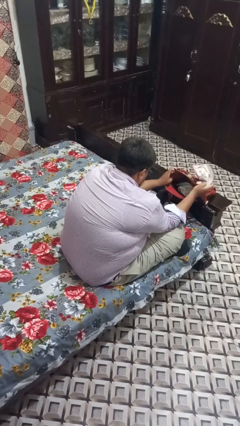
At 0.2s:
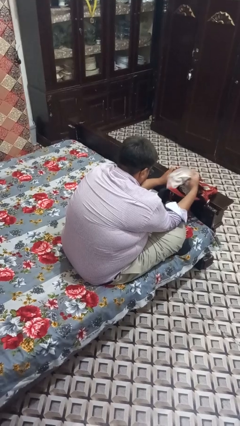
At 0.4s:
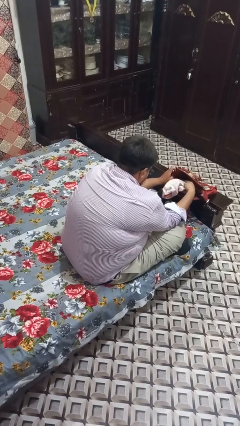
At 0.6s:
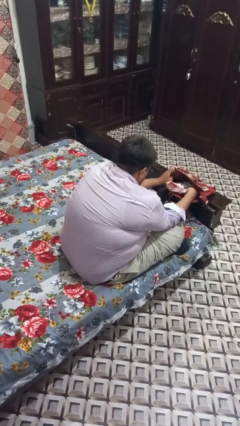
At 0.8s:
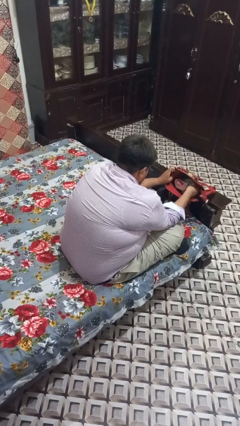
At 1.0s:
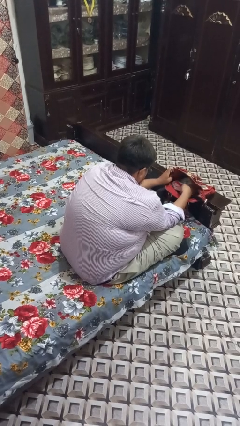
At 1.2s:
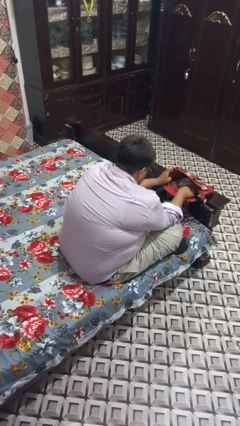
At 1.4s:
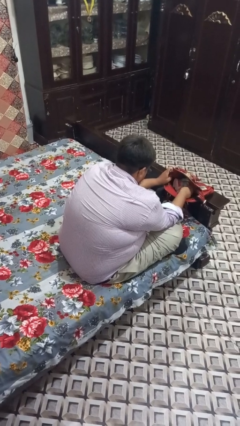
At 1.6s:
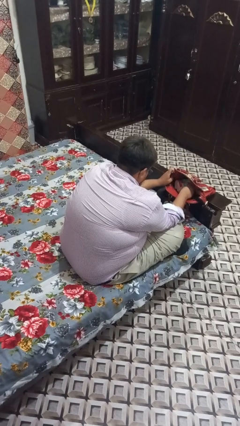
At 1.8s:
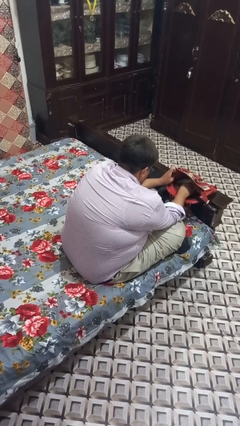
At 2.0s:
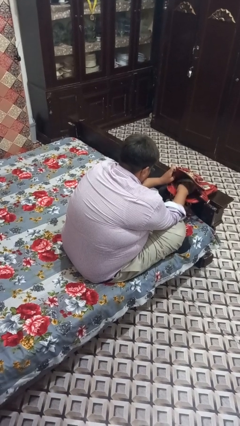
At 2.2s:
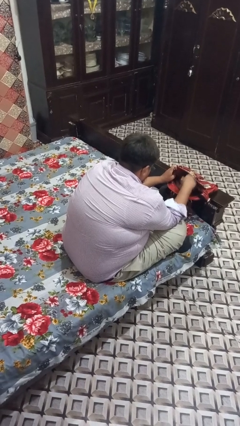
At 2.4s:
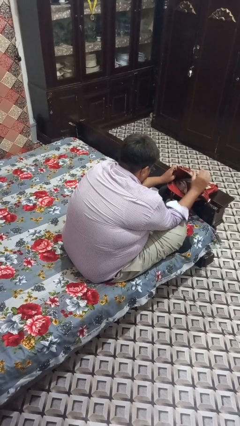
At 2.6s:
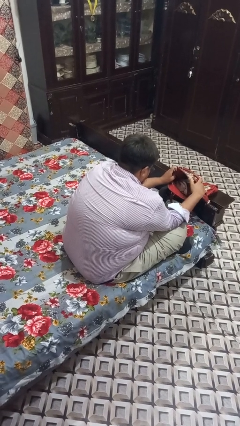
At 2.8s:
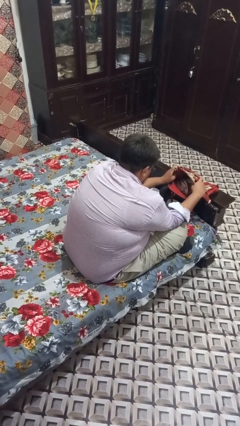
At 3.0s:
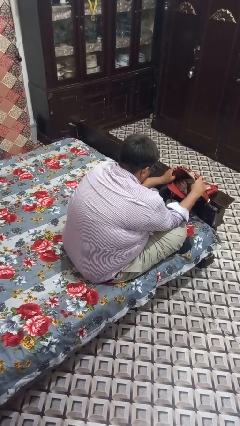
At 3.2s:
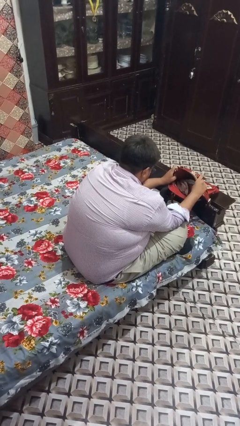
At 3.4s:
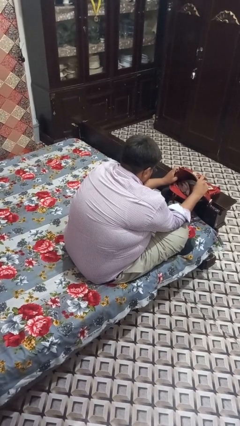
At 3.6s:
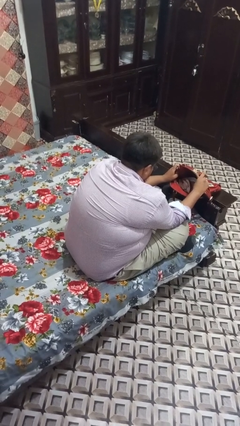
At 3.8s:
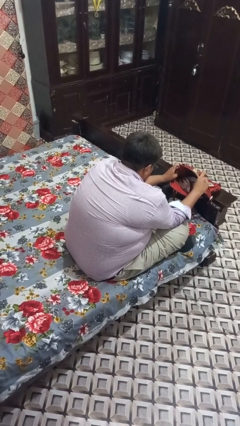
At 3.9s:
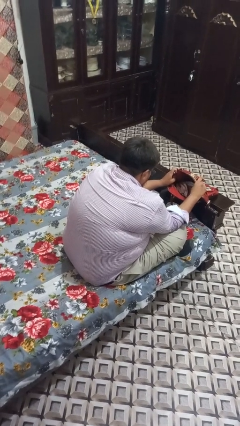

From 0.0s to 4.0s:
person puts object into purse

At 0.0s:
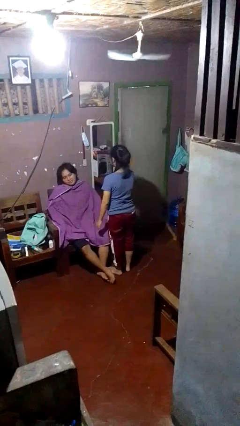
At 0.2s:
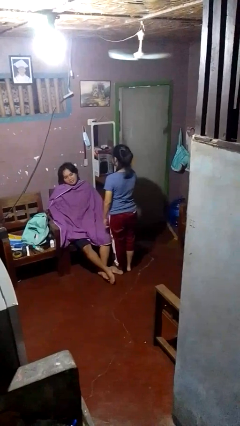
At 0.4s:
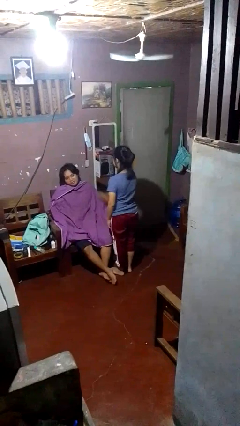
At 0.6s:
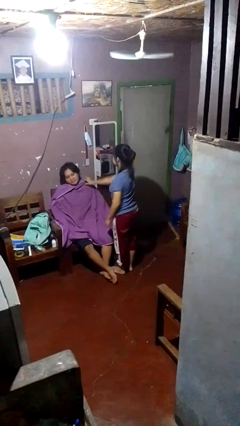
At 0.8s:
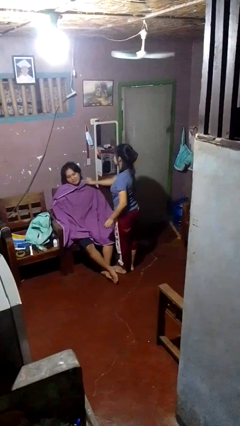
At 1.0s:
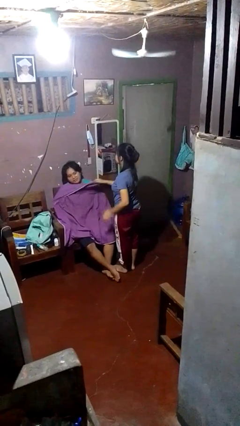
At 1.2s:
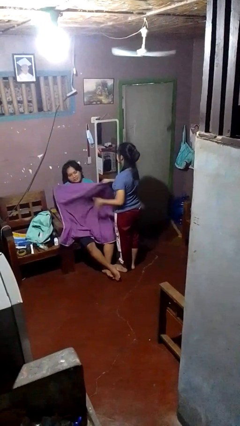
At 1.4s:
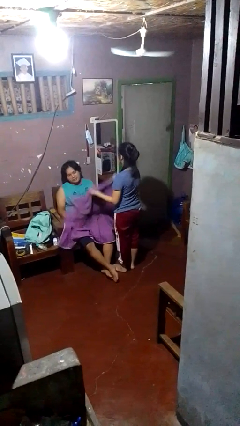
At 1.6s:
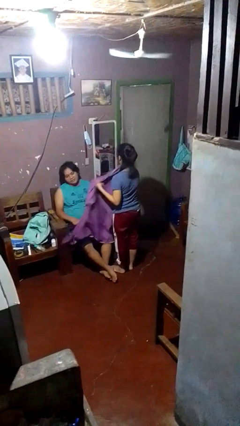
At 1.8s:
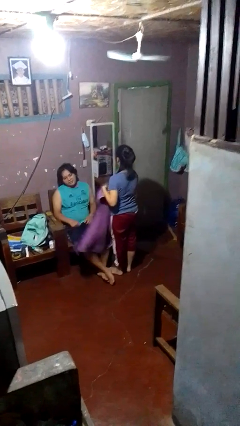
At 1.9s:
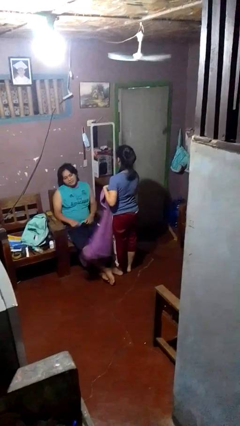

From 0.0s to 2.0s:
person uncovers friend with blanket

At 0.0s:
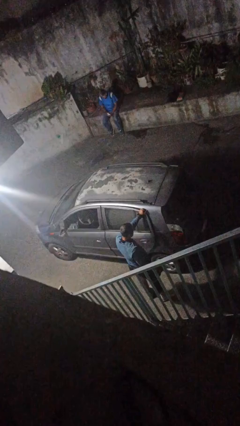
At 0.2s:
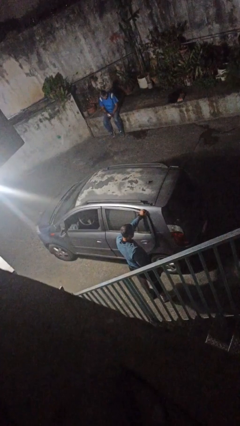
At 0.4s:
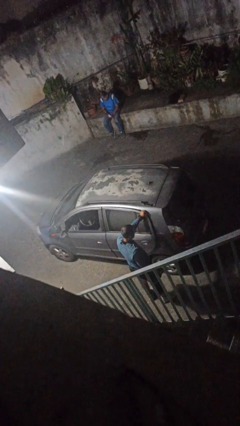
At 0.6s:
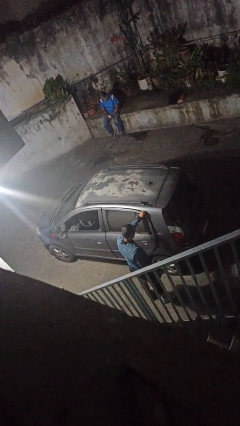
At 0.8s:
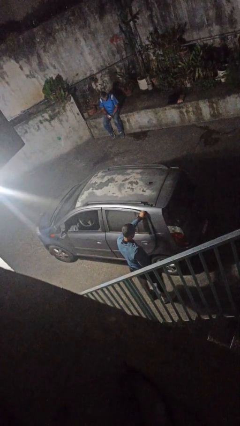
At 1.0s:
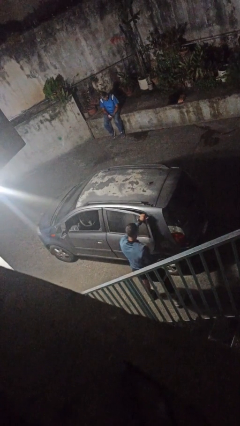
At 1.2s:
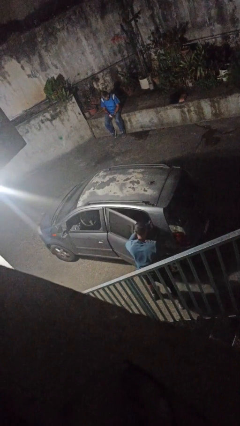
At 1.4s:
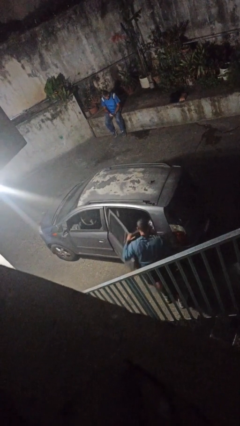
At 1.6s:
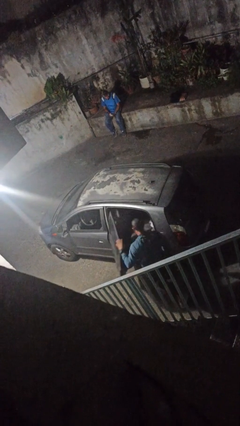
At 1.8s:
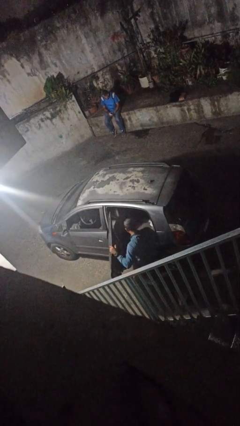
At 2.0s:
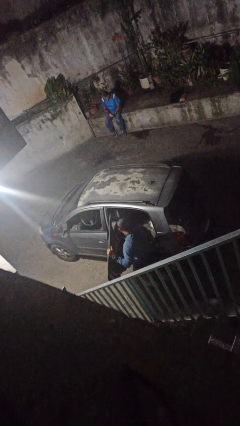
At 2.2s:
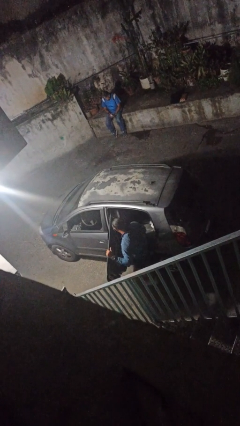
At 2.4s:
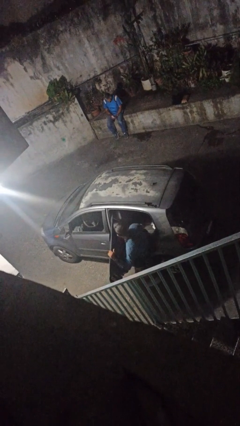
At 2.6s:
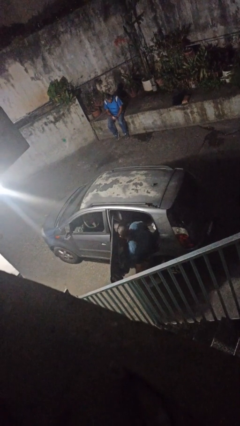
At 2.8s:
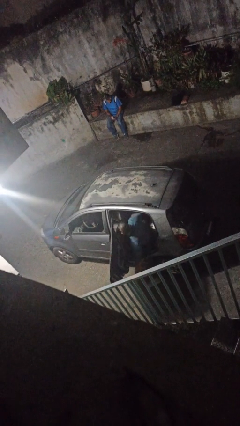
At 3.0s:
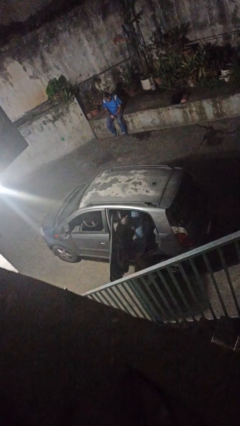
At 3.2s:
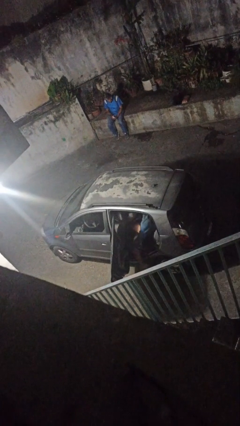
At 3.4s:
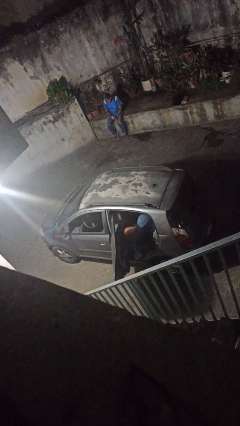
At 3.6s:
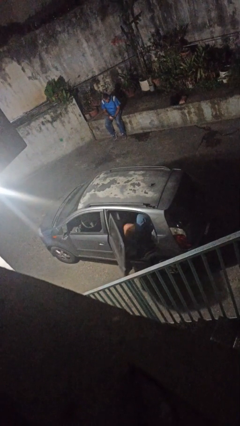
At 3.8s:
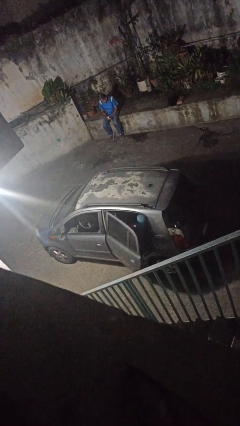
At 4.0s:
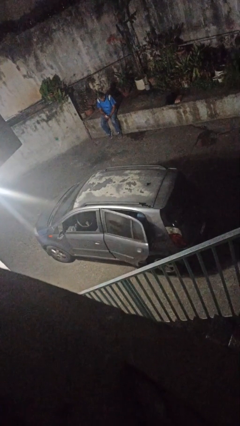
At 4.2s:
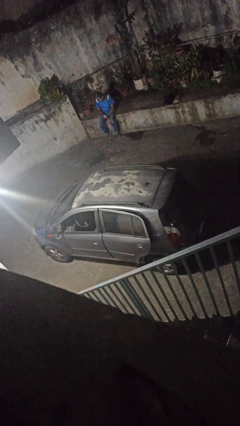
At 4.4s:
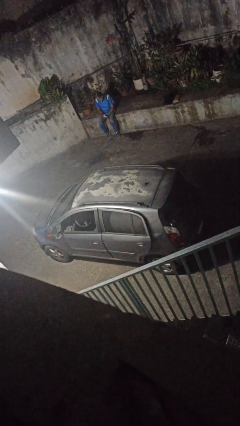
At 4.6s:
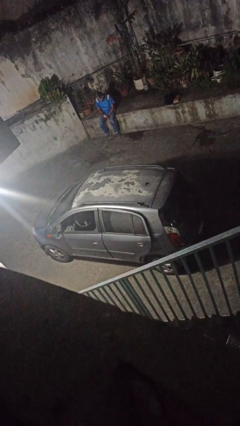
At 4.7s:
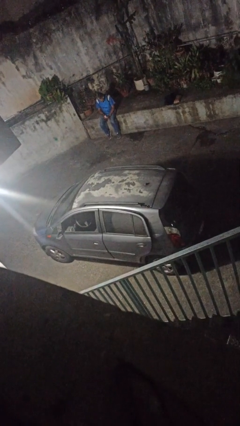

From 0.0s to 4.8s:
car picks up person

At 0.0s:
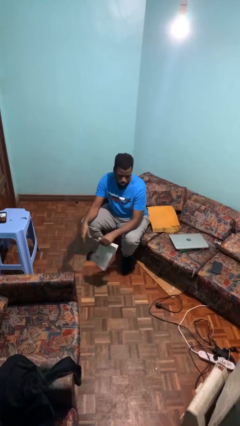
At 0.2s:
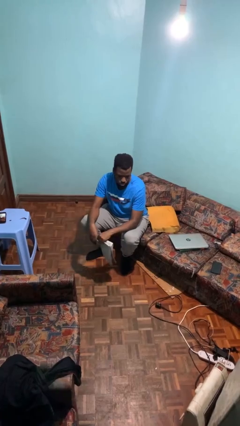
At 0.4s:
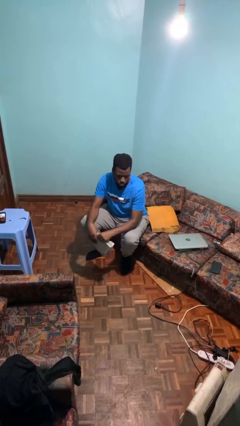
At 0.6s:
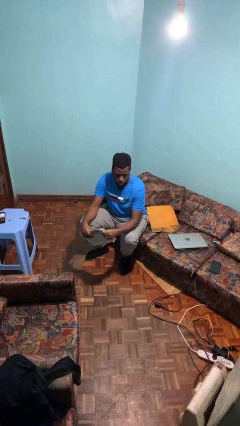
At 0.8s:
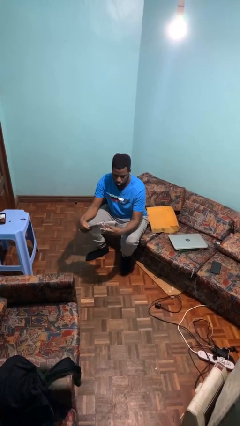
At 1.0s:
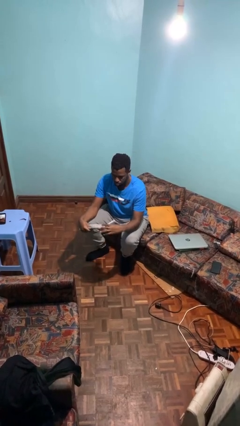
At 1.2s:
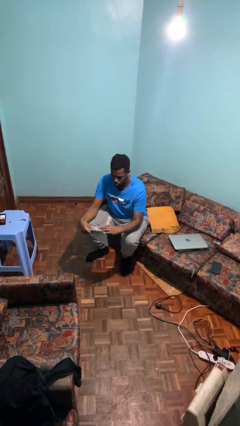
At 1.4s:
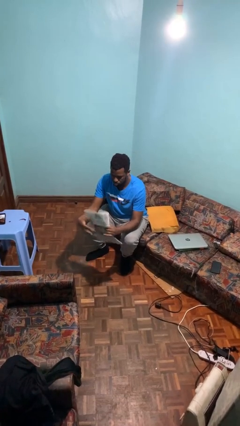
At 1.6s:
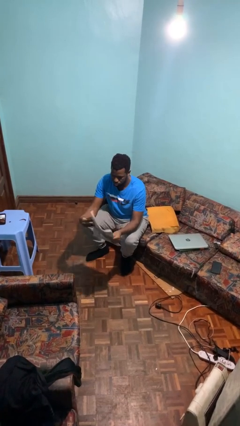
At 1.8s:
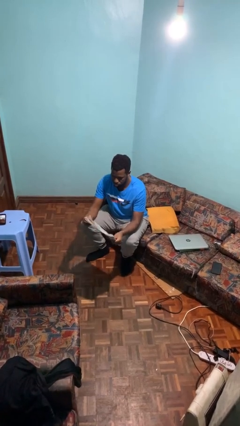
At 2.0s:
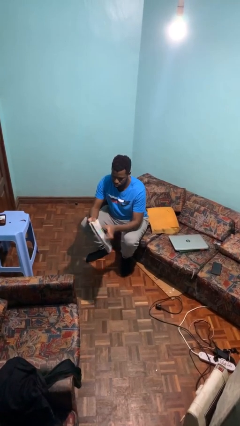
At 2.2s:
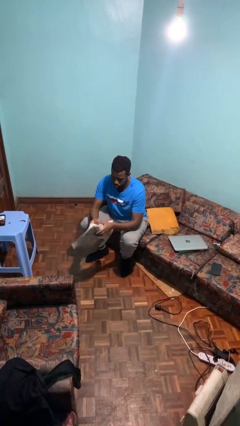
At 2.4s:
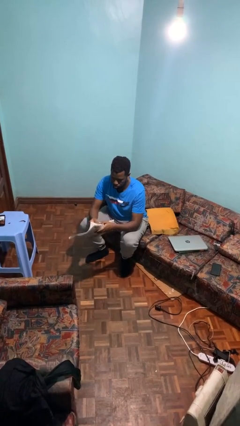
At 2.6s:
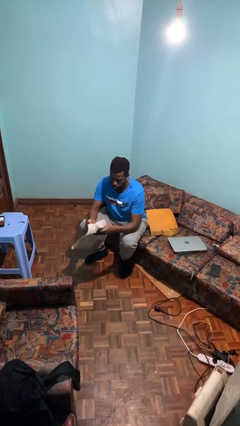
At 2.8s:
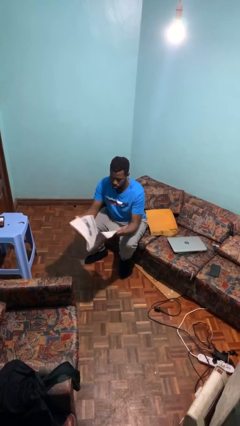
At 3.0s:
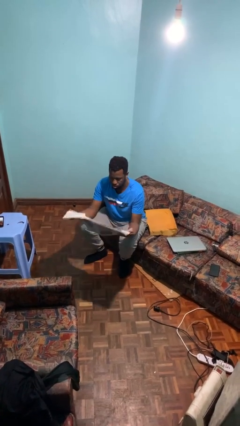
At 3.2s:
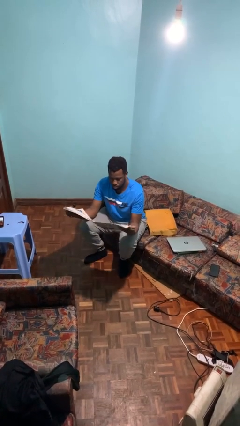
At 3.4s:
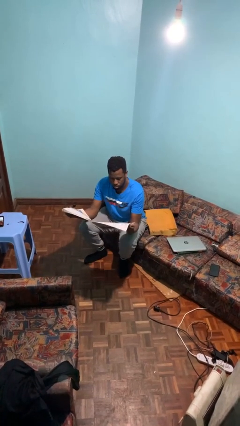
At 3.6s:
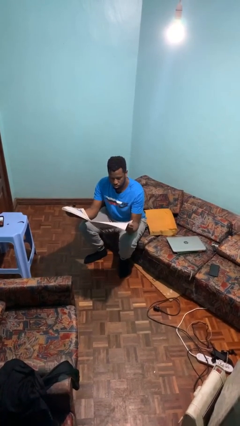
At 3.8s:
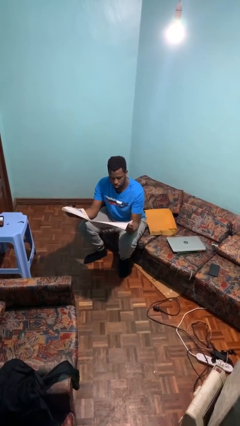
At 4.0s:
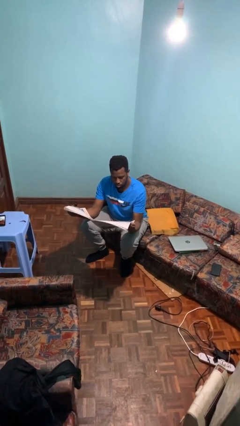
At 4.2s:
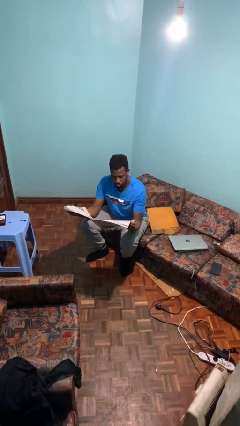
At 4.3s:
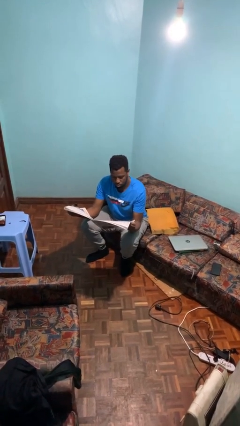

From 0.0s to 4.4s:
person reads newspaper

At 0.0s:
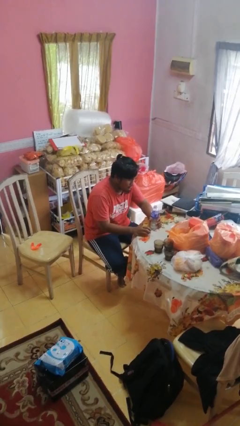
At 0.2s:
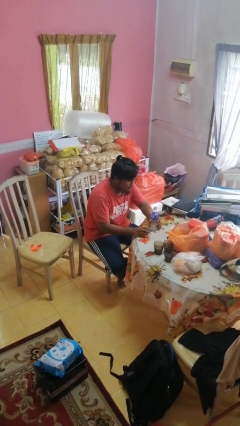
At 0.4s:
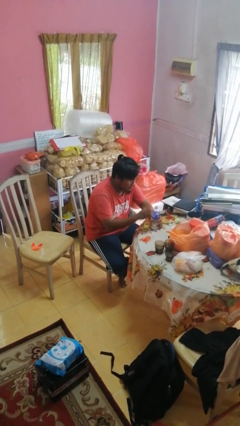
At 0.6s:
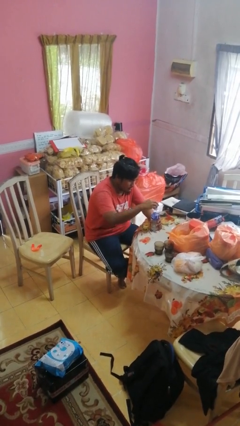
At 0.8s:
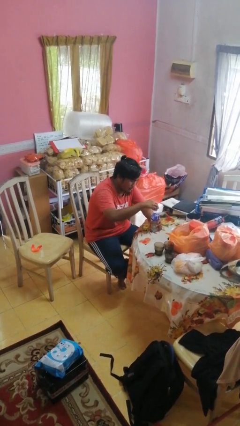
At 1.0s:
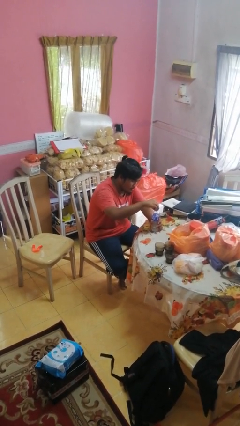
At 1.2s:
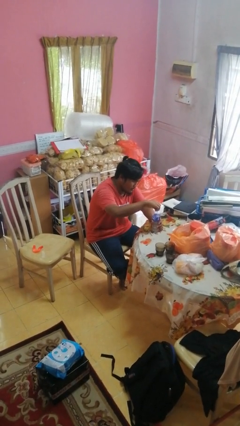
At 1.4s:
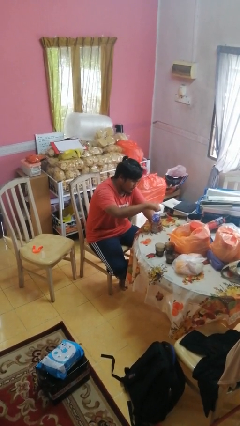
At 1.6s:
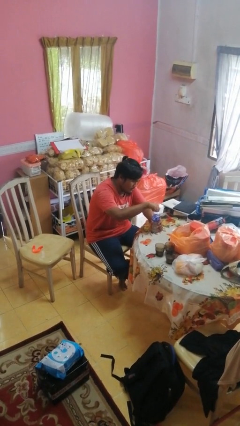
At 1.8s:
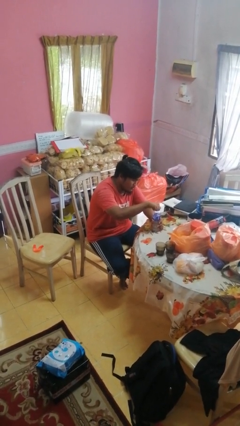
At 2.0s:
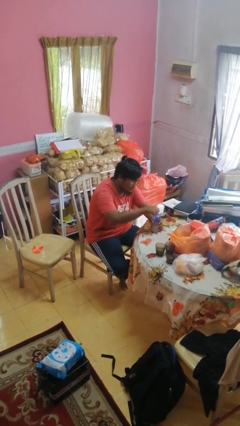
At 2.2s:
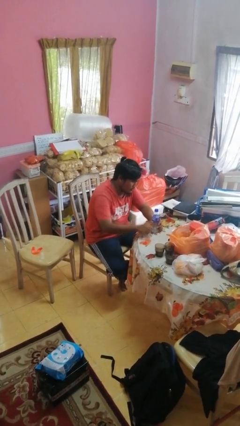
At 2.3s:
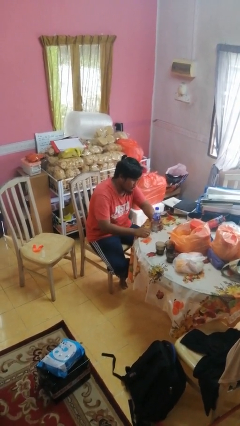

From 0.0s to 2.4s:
person screws lid to bottle
